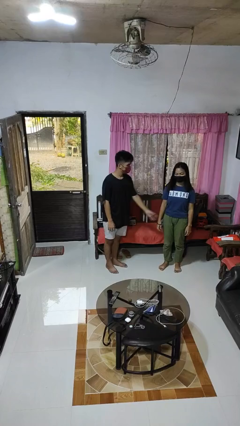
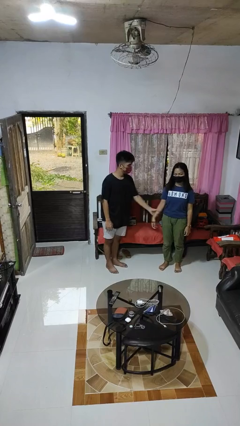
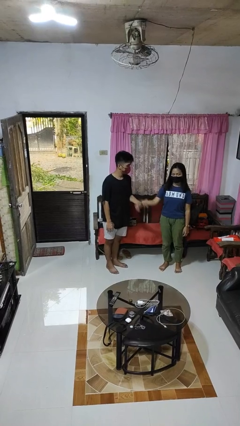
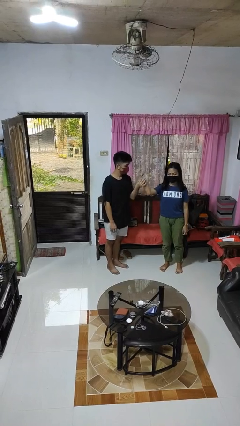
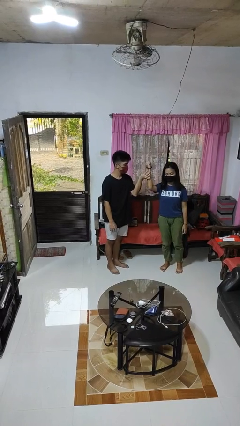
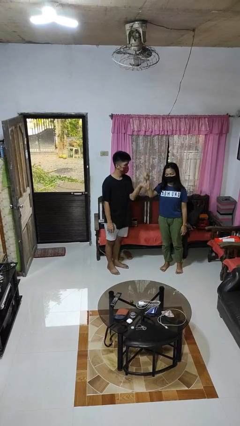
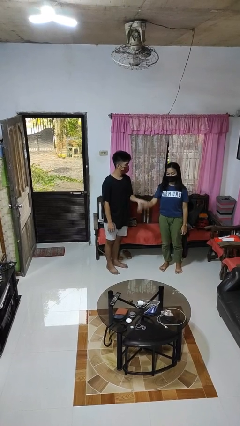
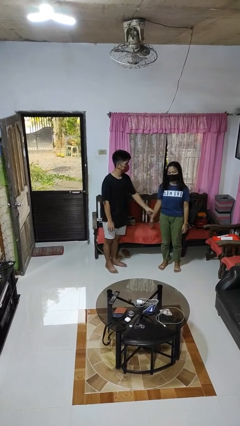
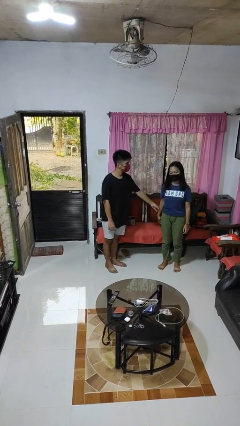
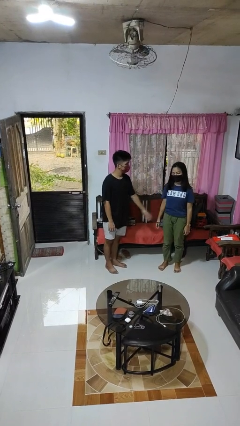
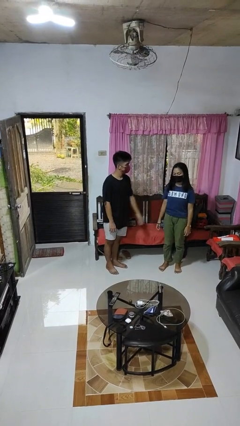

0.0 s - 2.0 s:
person grabs person by forearm

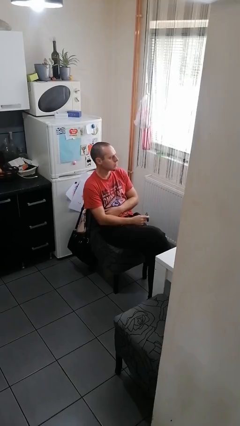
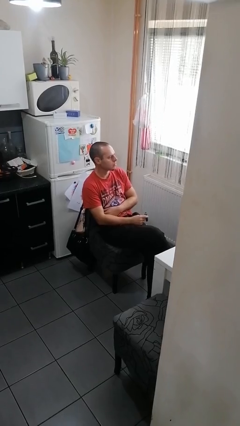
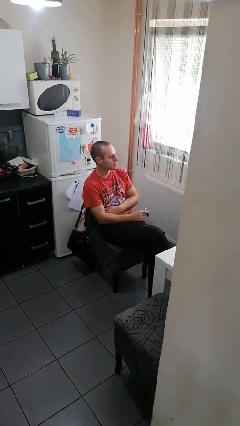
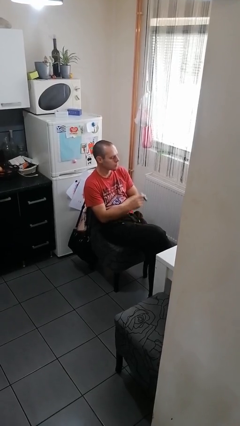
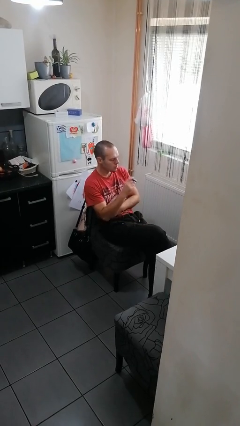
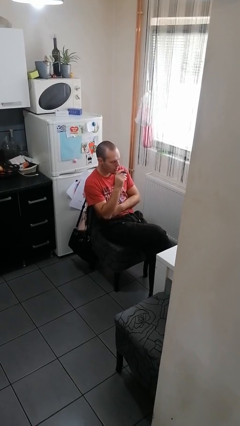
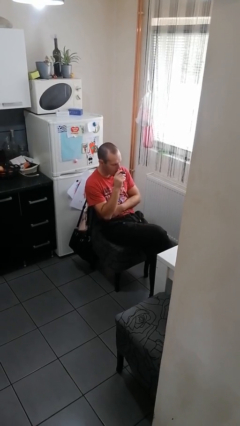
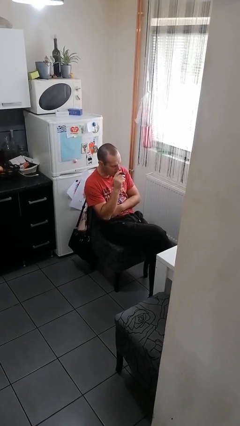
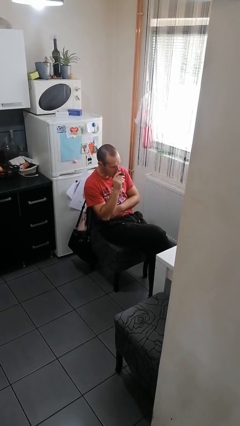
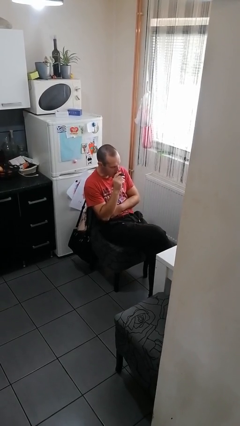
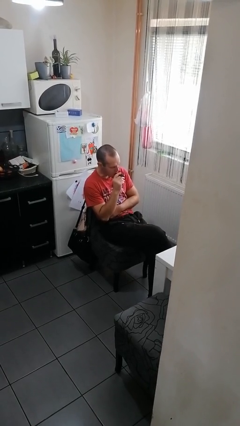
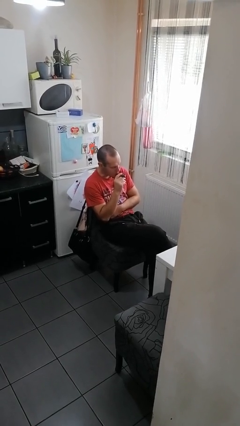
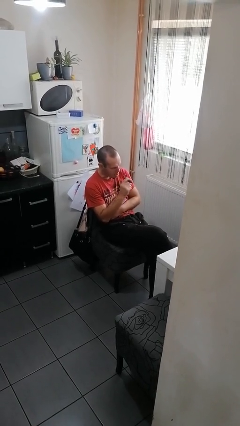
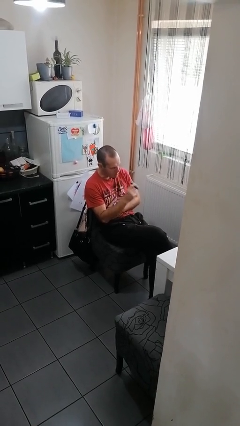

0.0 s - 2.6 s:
person vapes

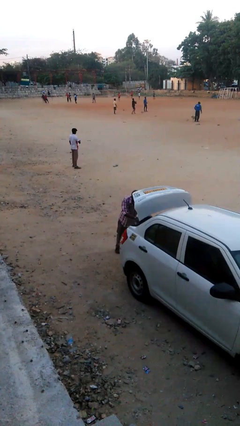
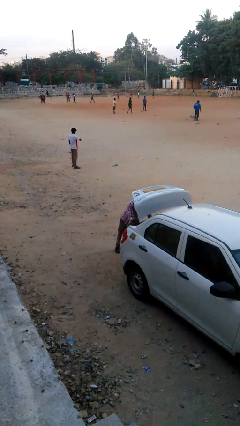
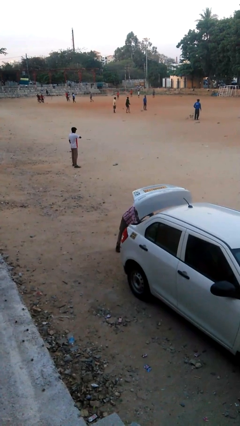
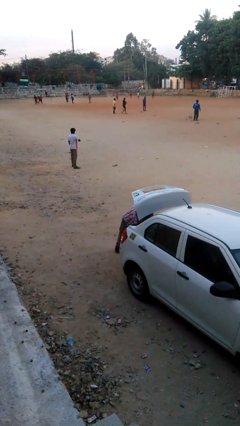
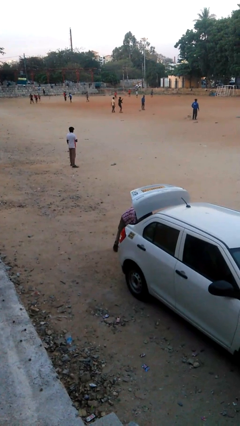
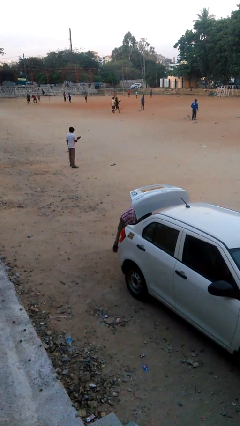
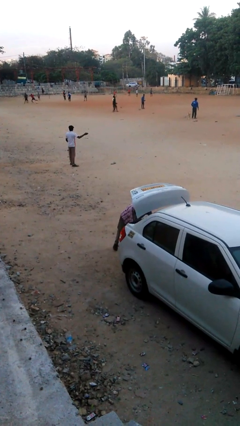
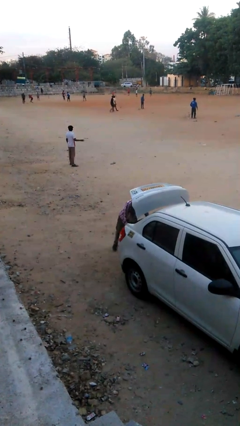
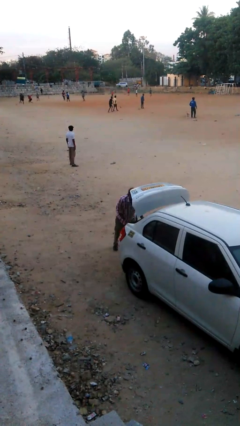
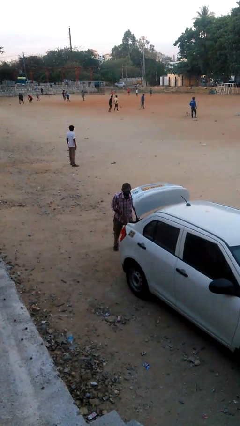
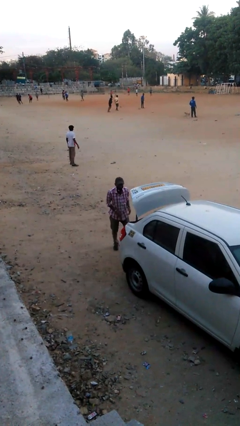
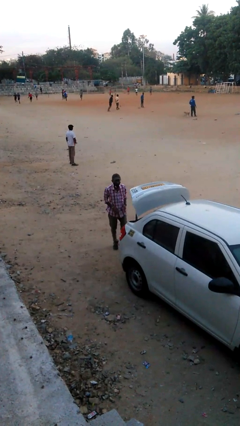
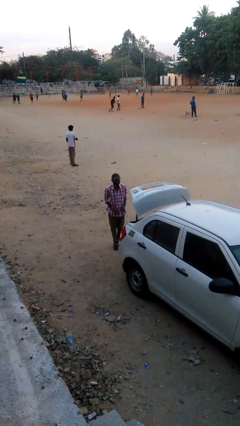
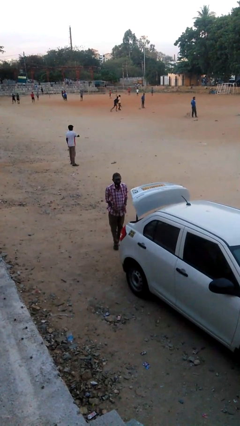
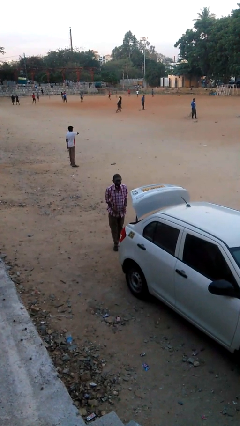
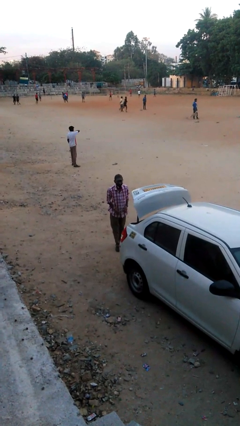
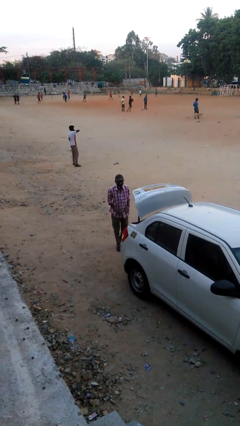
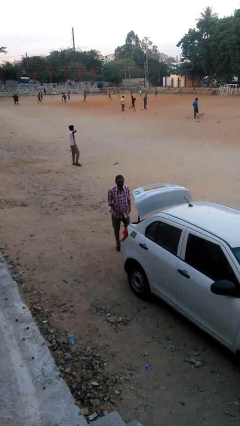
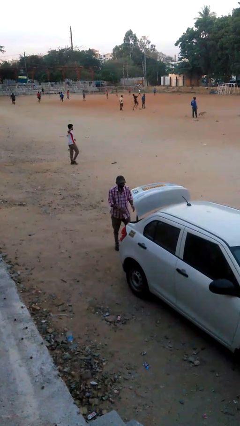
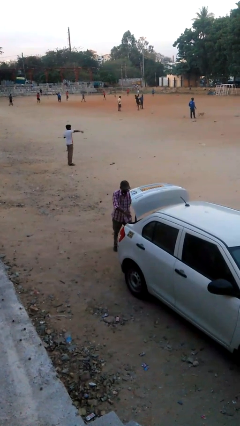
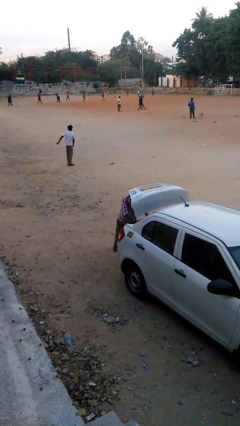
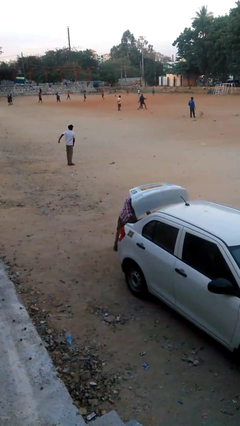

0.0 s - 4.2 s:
person loads car

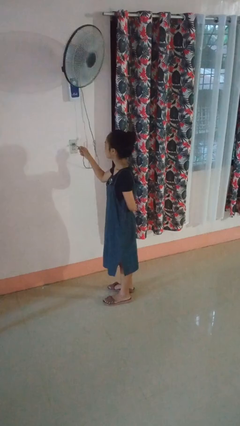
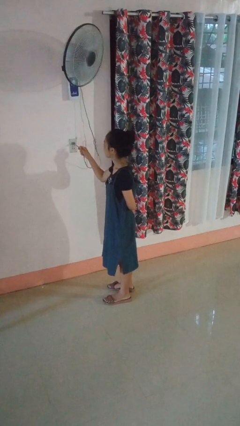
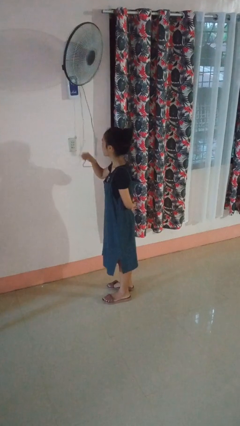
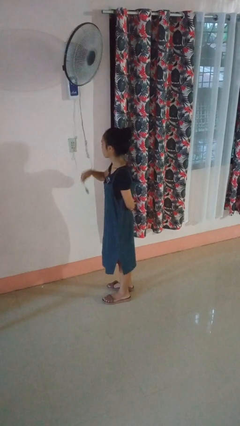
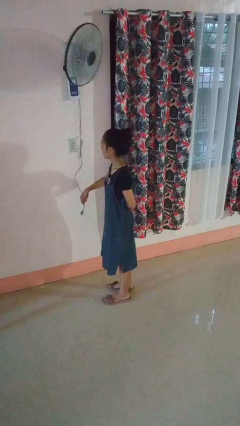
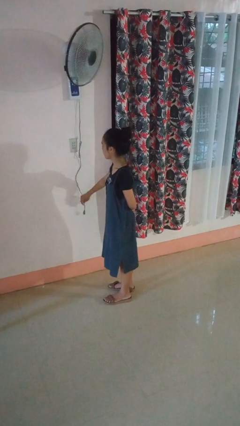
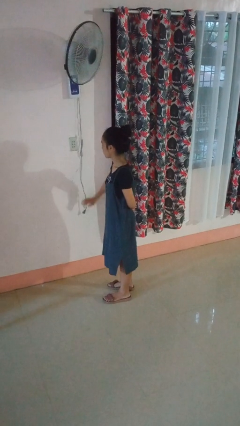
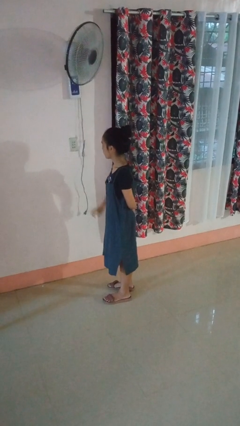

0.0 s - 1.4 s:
person unplugs from electrical socket

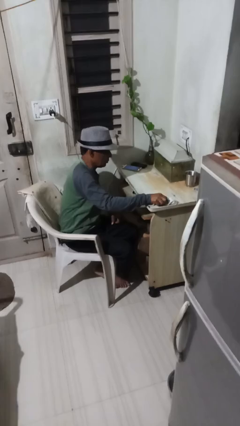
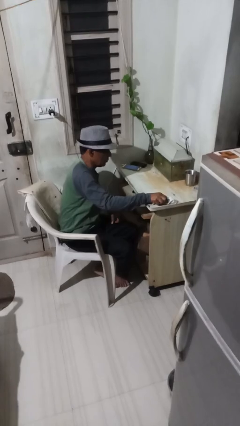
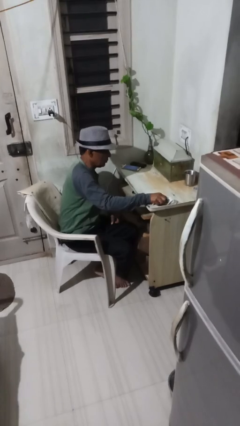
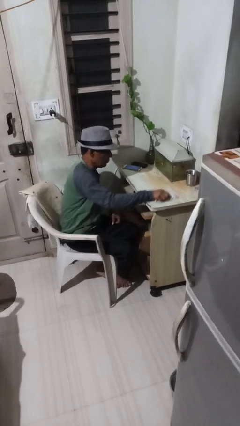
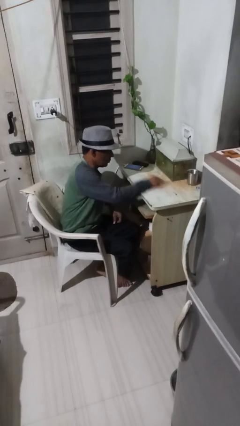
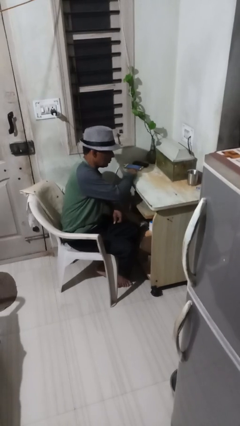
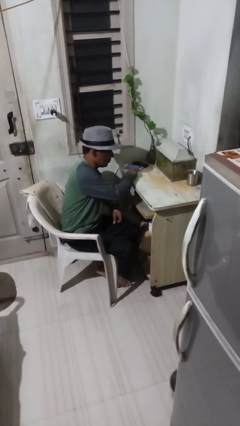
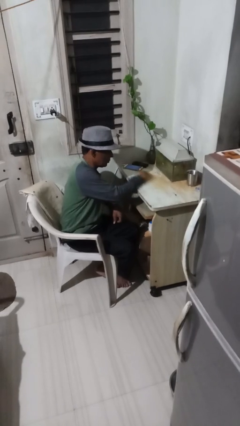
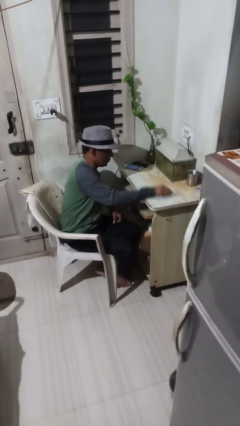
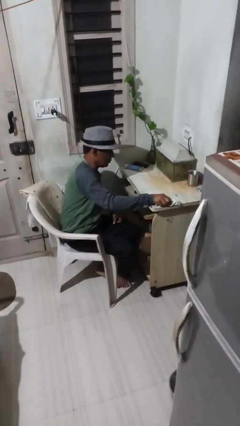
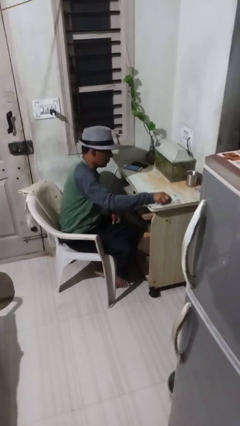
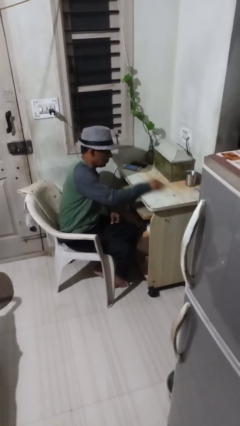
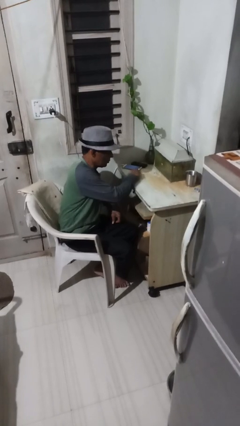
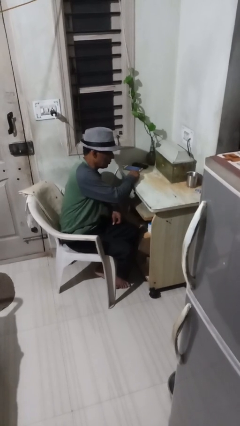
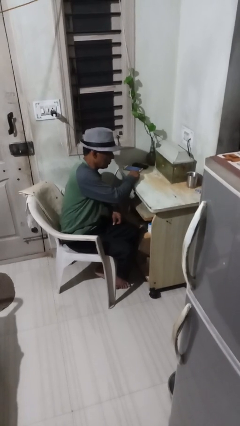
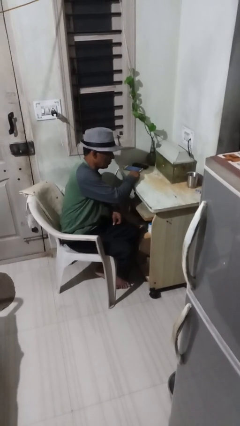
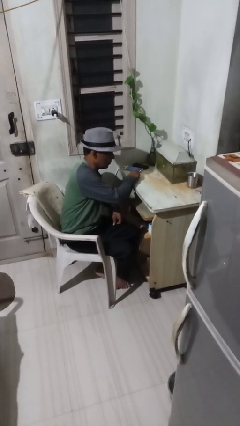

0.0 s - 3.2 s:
person cleans table with rag

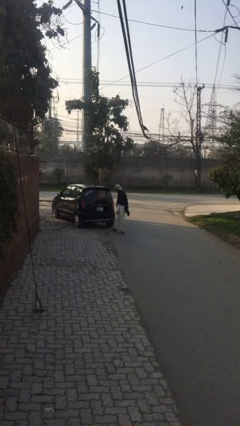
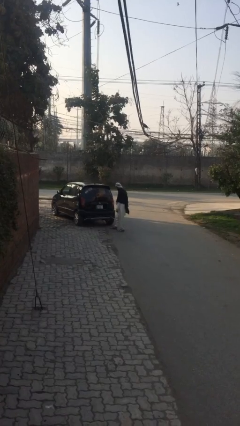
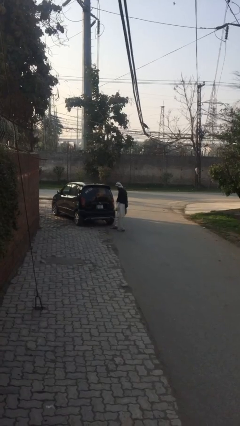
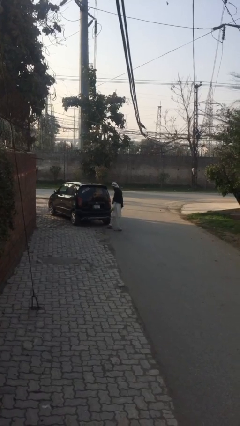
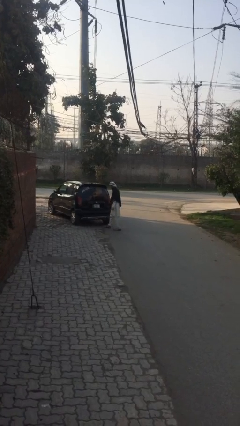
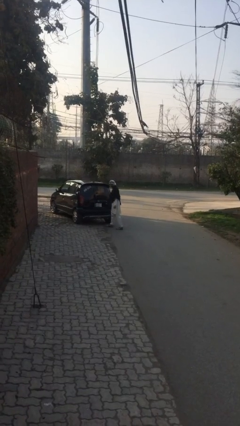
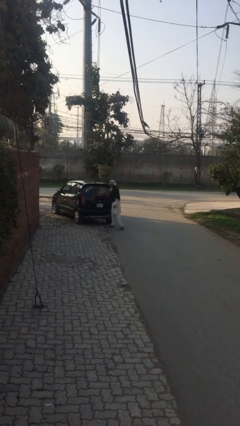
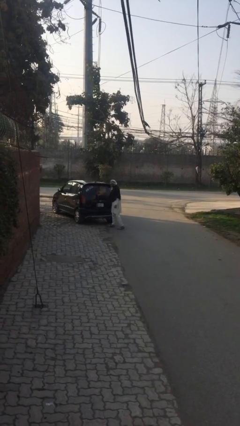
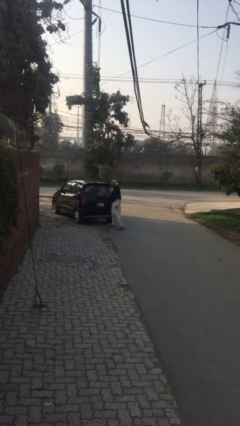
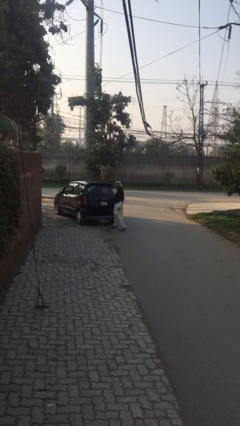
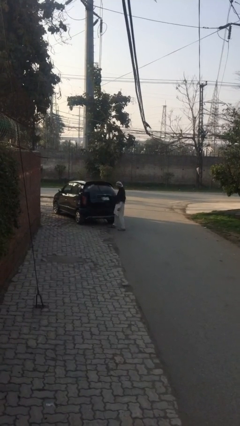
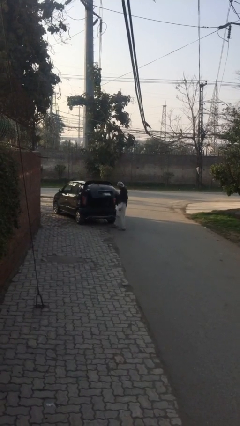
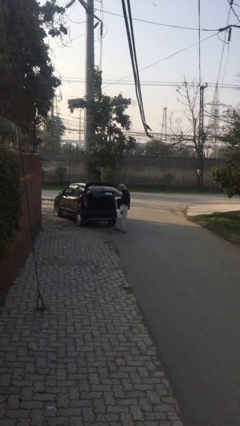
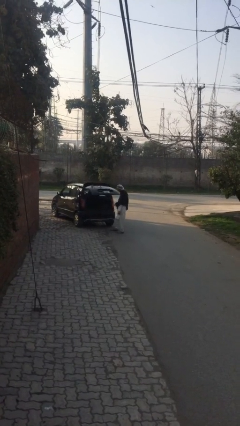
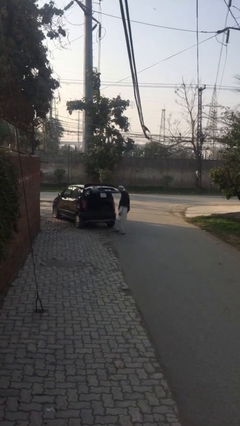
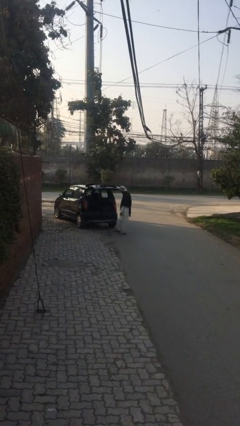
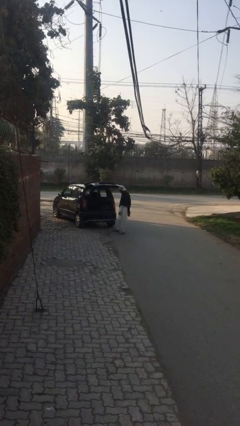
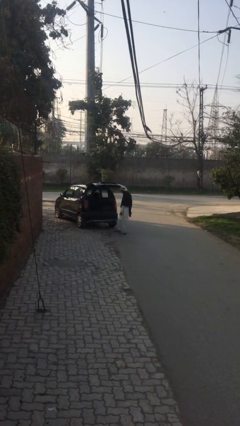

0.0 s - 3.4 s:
person opens car trunk

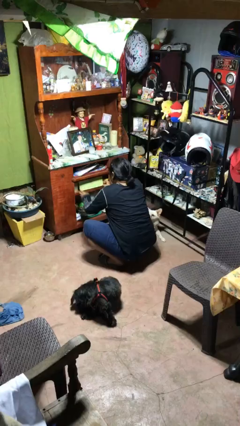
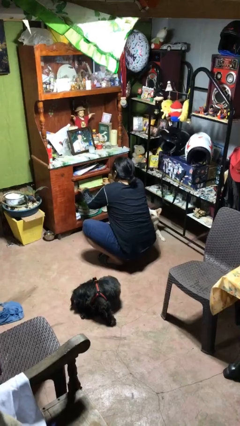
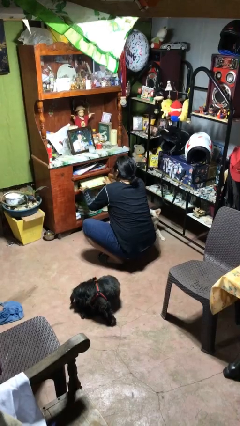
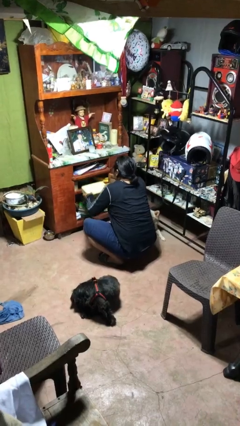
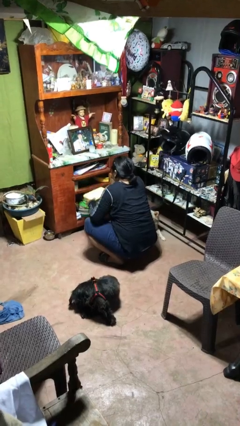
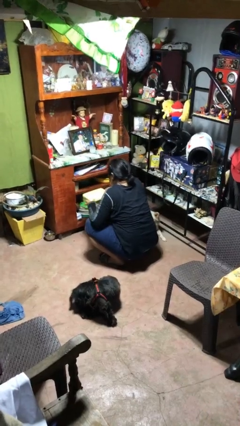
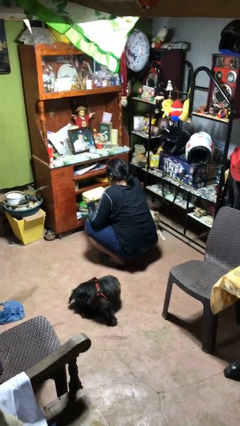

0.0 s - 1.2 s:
person picks up object from cabinet
